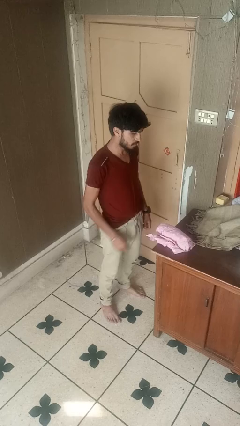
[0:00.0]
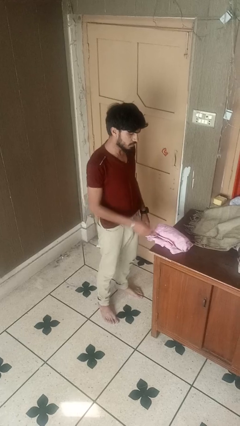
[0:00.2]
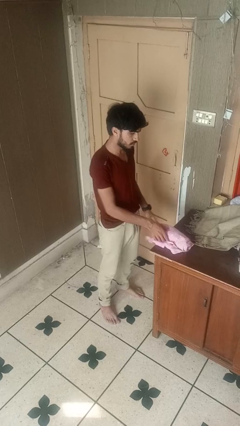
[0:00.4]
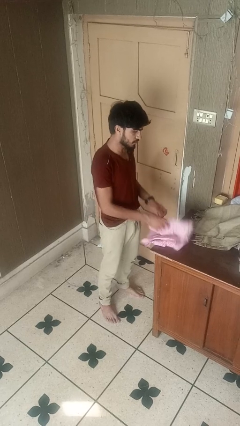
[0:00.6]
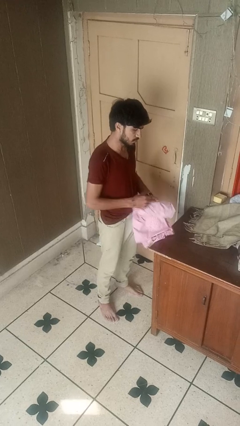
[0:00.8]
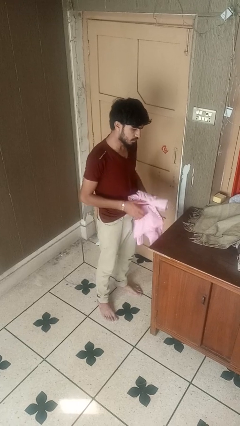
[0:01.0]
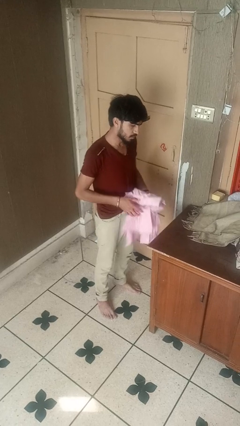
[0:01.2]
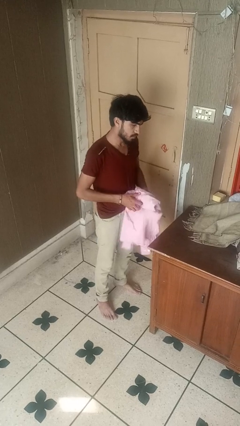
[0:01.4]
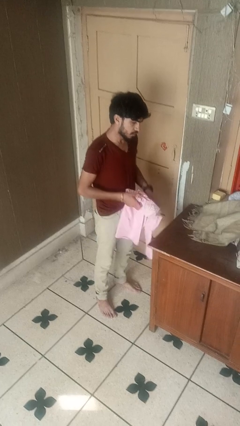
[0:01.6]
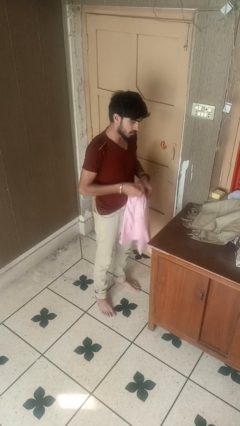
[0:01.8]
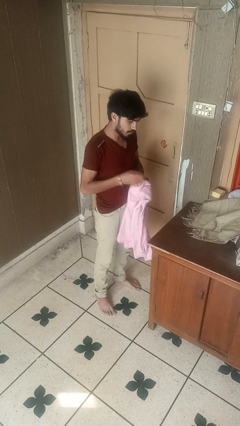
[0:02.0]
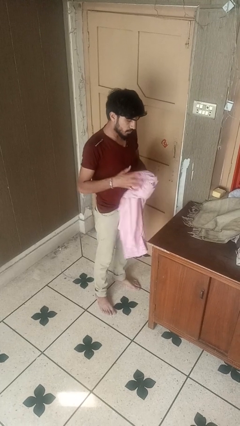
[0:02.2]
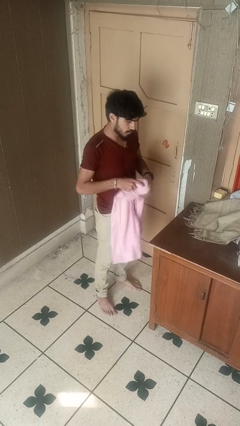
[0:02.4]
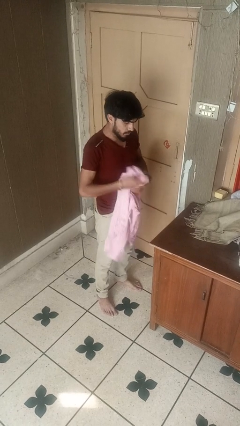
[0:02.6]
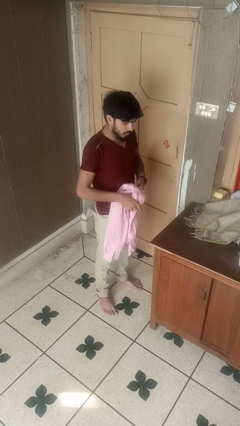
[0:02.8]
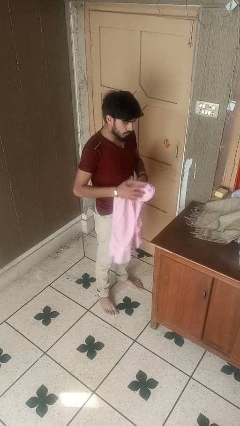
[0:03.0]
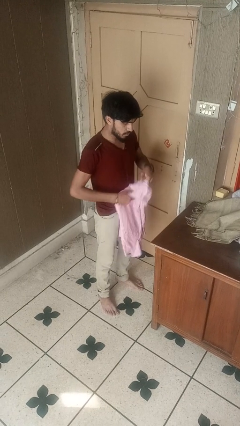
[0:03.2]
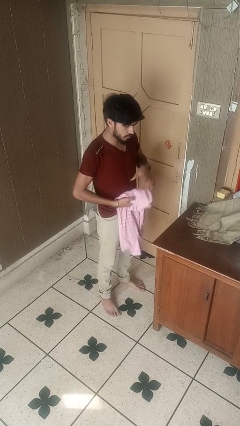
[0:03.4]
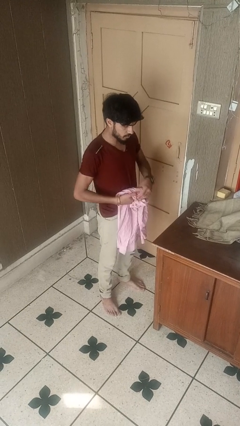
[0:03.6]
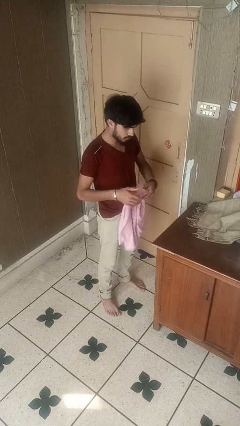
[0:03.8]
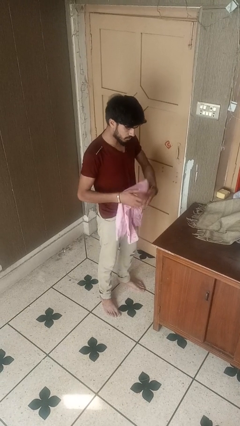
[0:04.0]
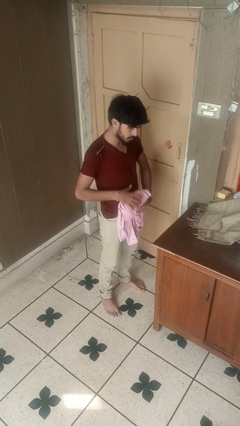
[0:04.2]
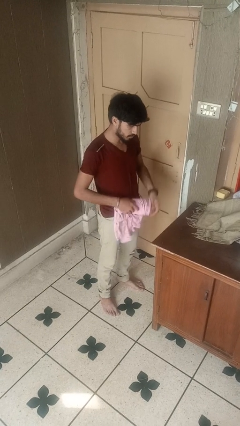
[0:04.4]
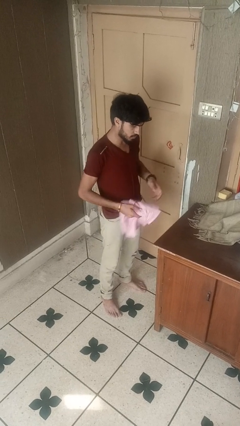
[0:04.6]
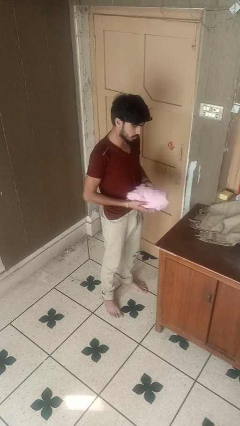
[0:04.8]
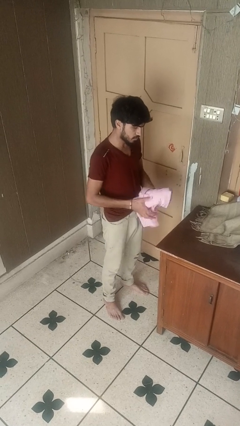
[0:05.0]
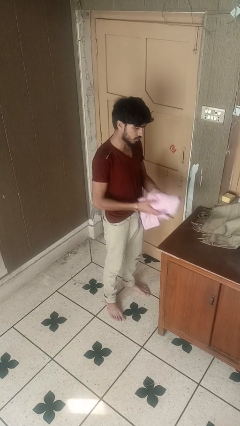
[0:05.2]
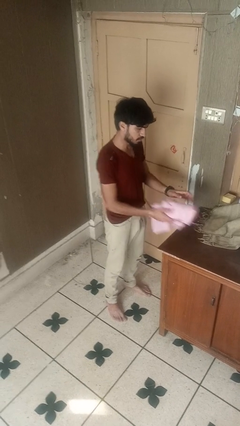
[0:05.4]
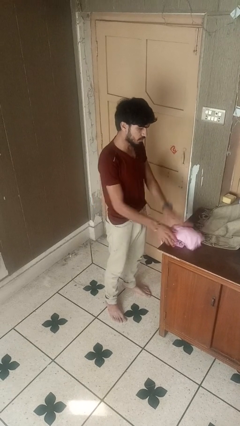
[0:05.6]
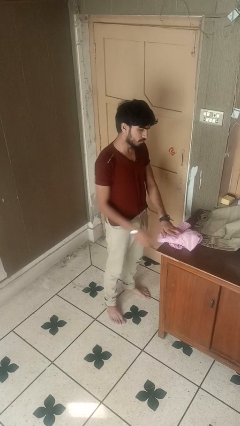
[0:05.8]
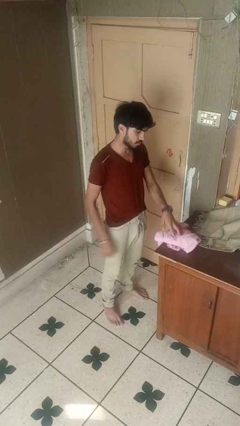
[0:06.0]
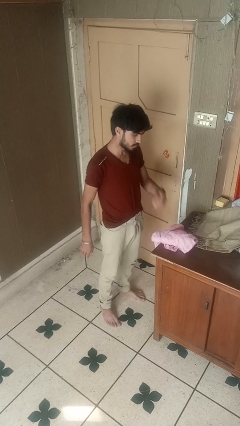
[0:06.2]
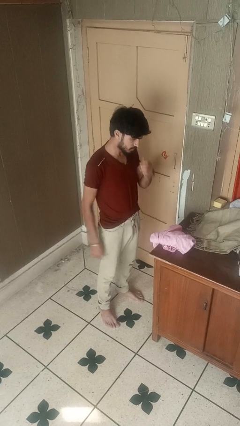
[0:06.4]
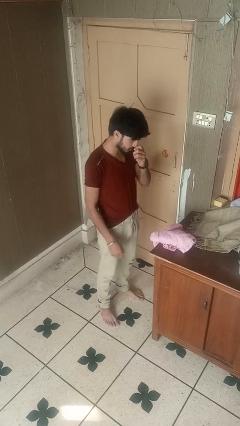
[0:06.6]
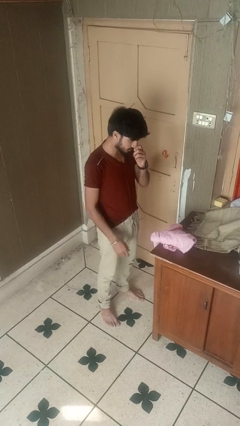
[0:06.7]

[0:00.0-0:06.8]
person folds shirt

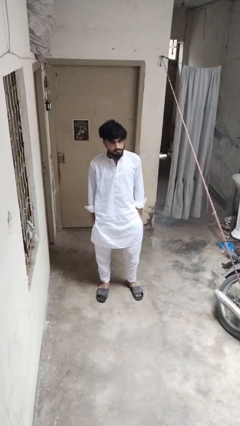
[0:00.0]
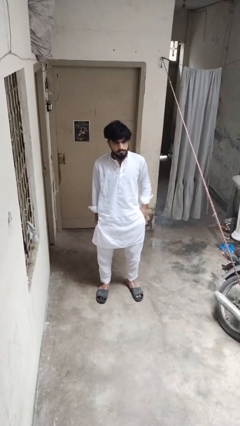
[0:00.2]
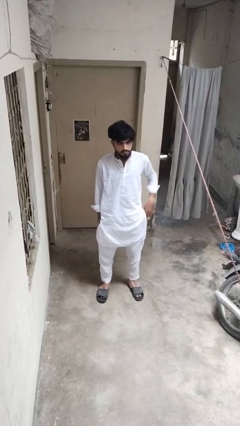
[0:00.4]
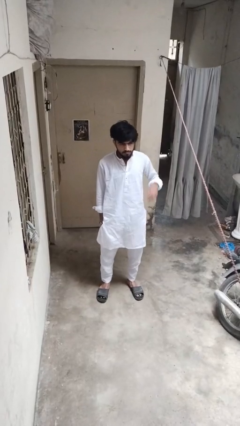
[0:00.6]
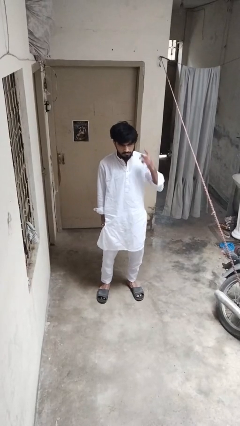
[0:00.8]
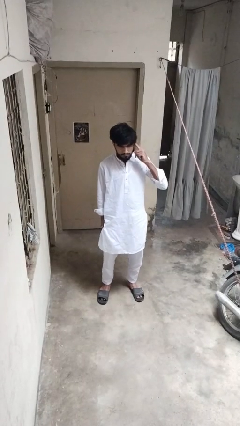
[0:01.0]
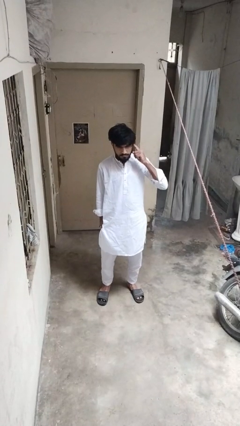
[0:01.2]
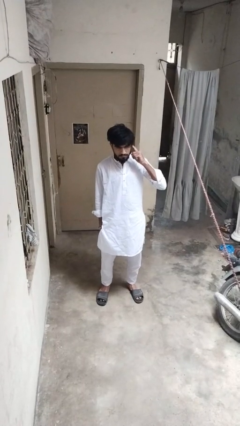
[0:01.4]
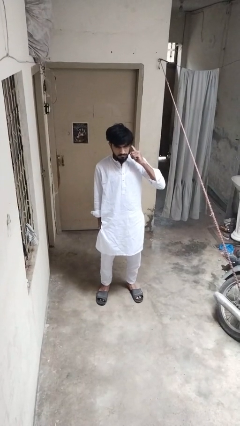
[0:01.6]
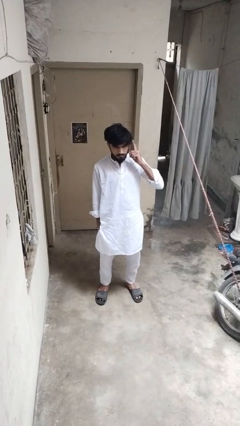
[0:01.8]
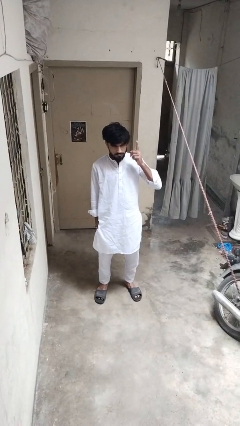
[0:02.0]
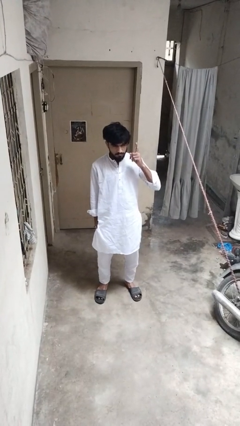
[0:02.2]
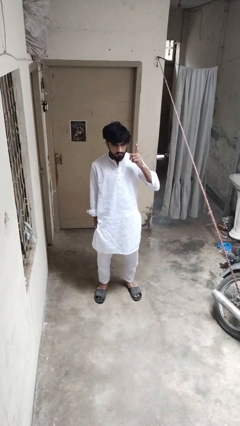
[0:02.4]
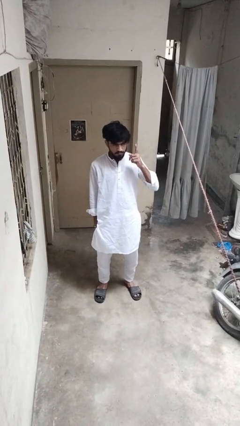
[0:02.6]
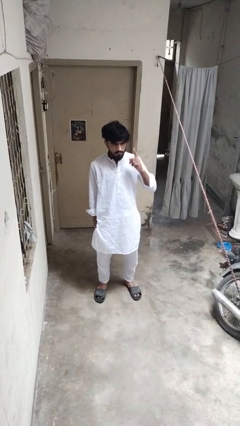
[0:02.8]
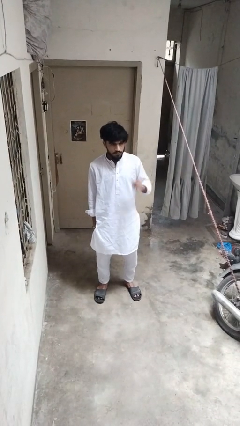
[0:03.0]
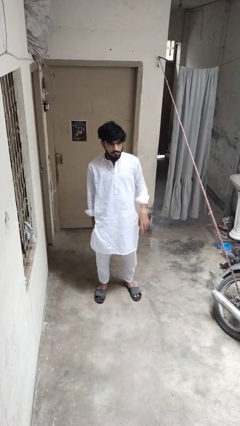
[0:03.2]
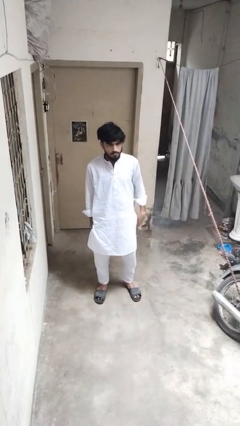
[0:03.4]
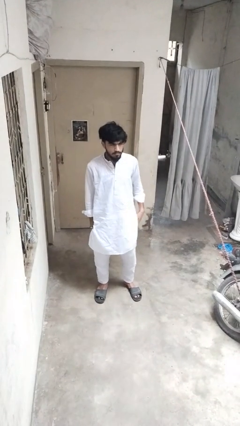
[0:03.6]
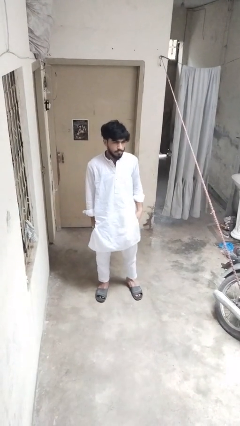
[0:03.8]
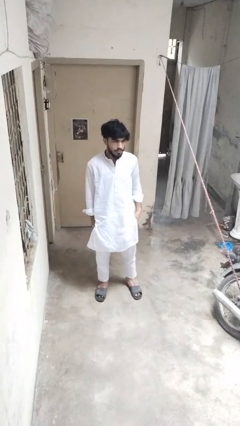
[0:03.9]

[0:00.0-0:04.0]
person gestures listen closely

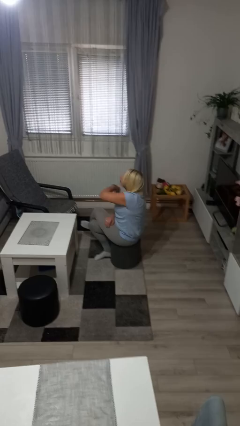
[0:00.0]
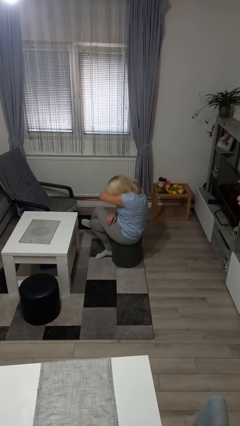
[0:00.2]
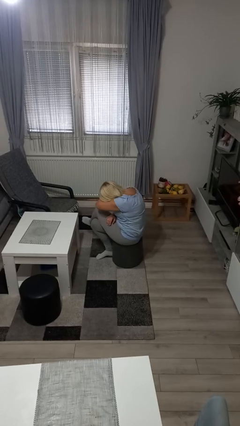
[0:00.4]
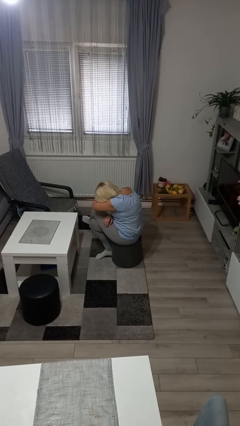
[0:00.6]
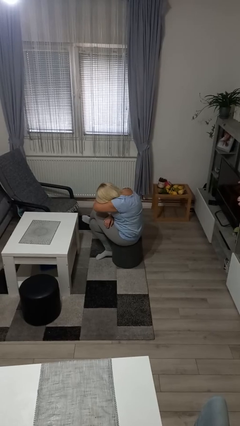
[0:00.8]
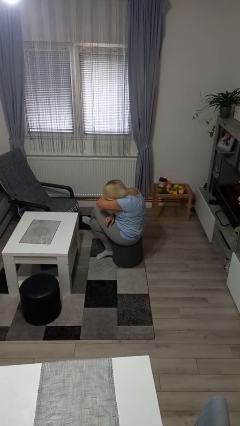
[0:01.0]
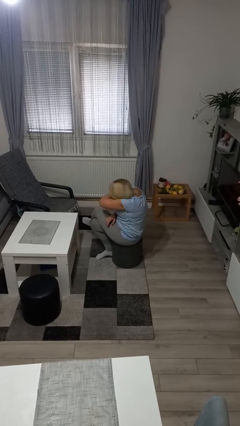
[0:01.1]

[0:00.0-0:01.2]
person sneezes into arm

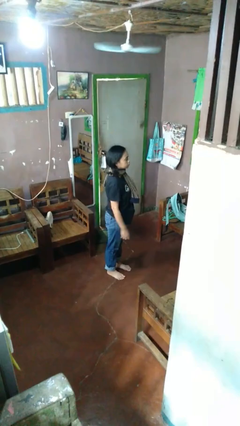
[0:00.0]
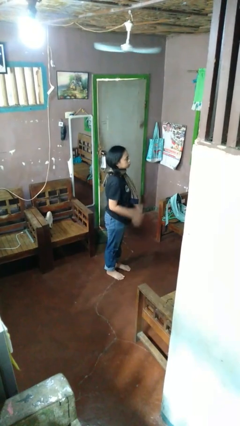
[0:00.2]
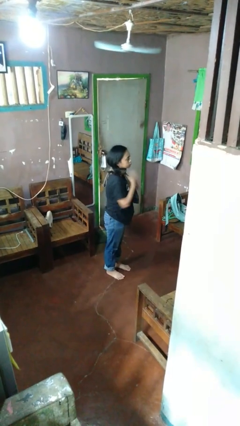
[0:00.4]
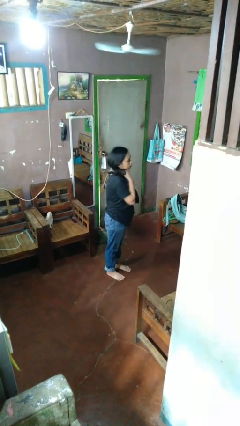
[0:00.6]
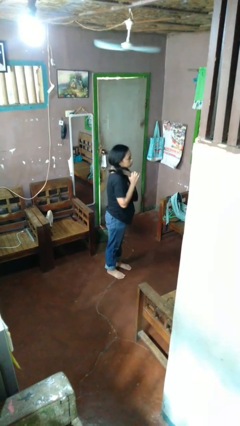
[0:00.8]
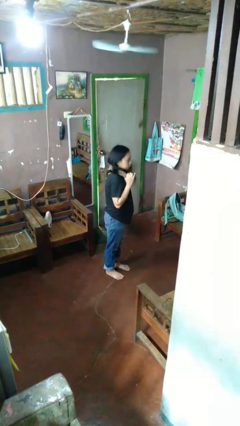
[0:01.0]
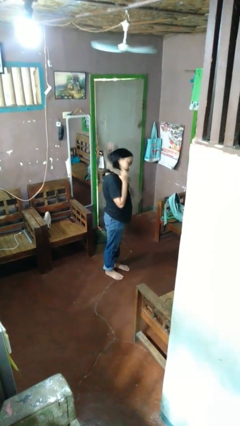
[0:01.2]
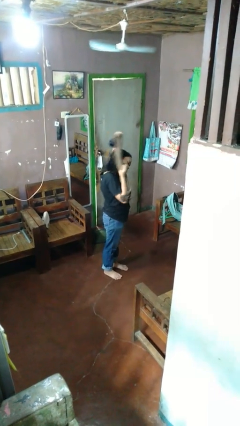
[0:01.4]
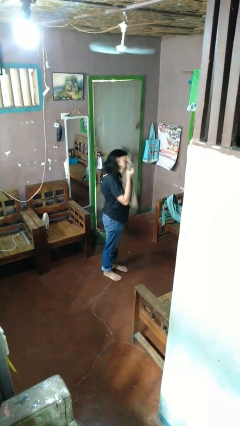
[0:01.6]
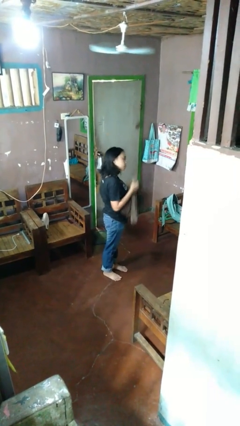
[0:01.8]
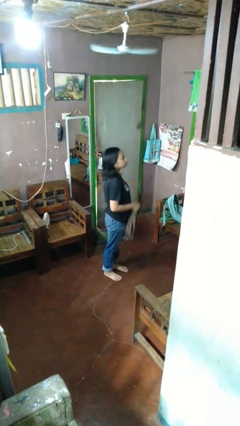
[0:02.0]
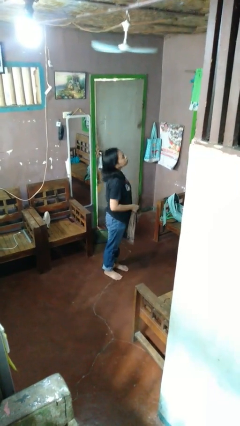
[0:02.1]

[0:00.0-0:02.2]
person takes off scarf

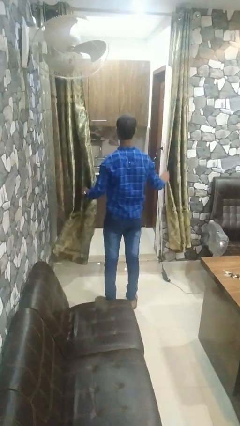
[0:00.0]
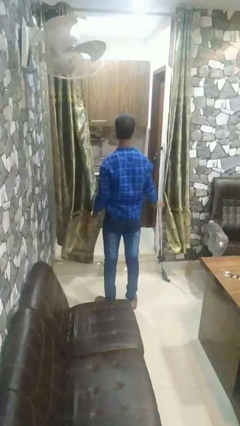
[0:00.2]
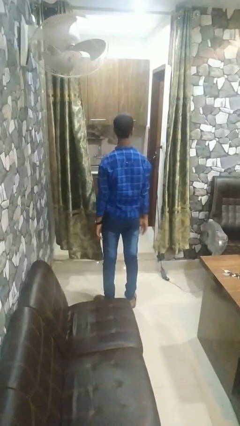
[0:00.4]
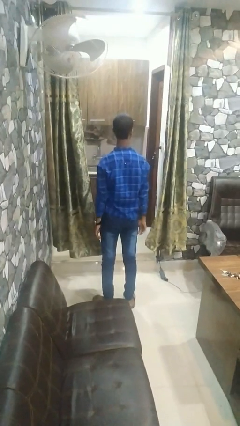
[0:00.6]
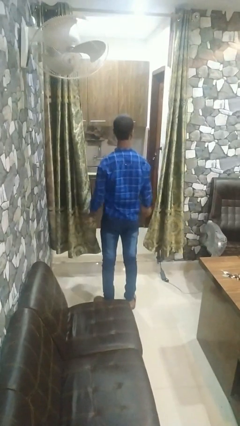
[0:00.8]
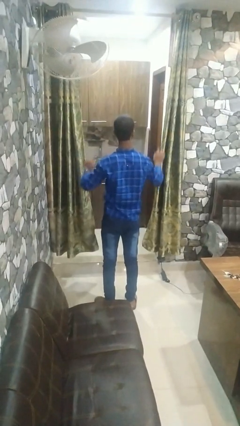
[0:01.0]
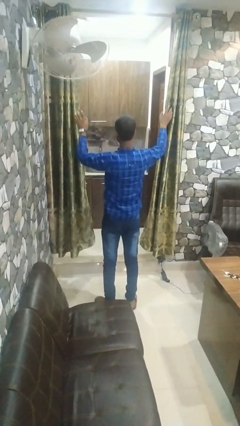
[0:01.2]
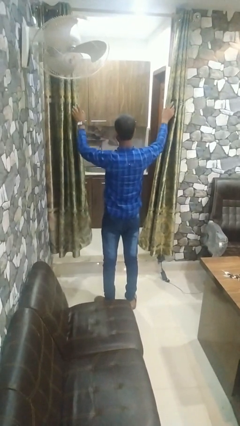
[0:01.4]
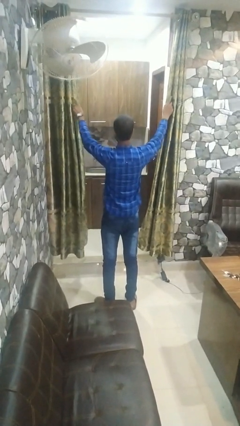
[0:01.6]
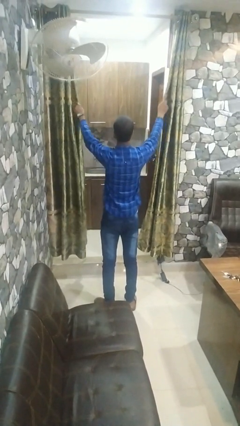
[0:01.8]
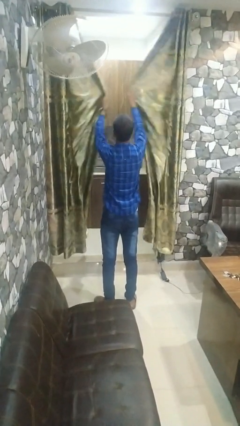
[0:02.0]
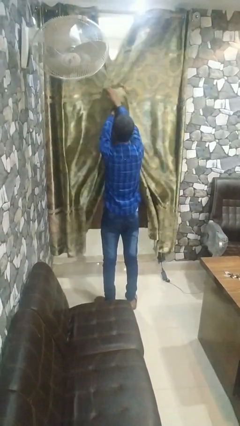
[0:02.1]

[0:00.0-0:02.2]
person closes curtains

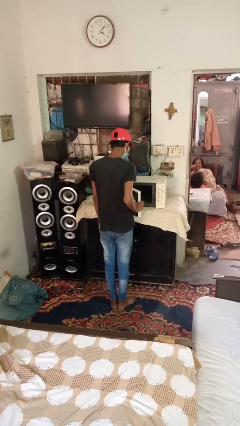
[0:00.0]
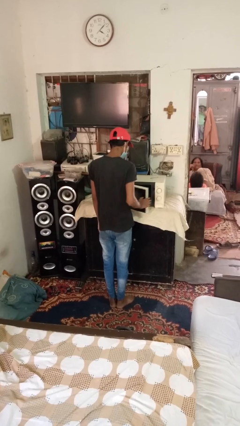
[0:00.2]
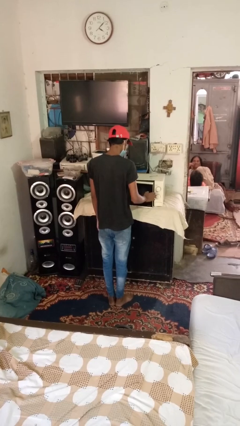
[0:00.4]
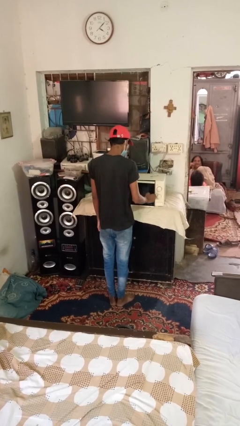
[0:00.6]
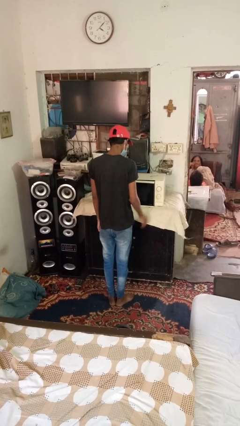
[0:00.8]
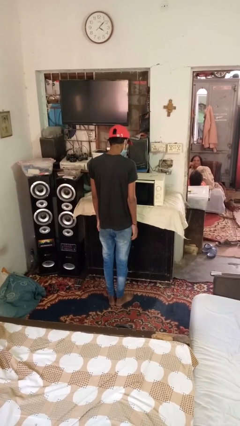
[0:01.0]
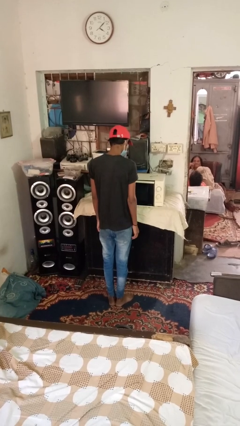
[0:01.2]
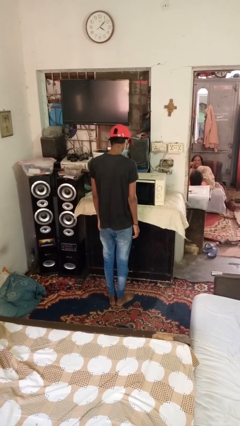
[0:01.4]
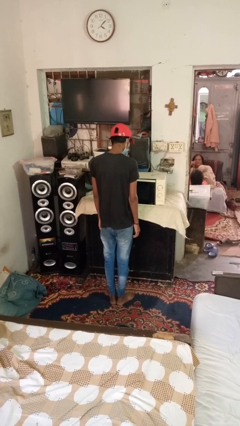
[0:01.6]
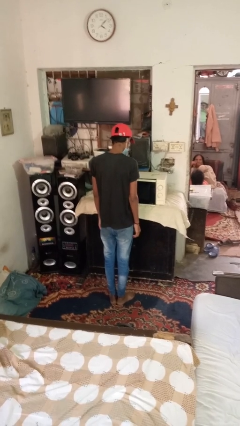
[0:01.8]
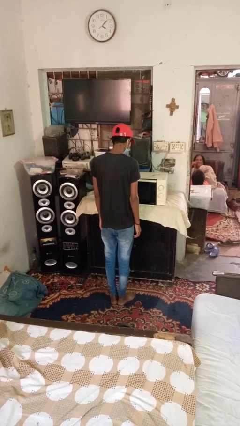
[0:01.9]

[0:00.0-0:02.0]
person closes dishwasher
